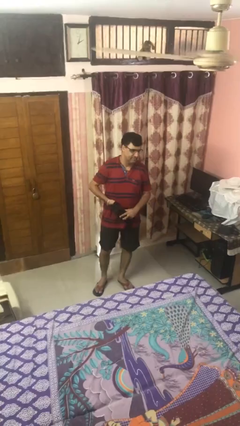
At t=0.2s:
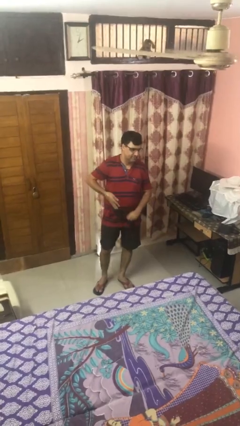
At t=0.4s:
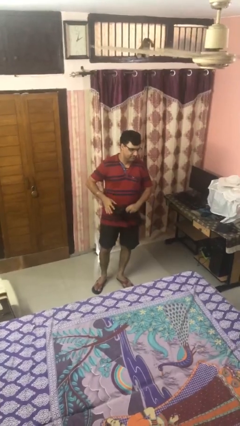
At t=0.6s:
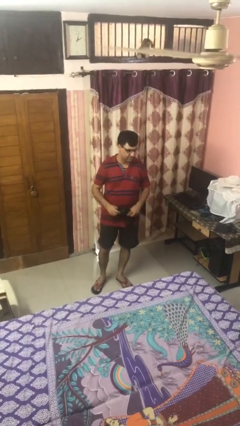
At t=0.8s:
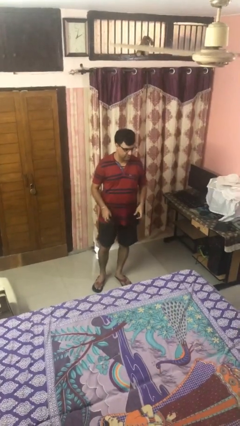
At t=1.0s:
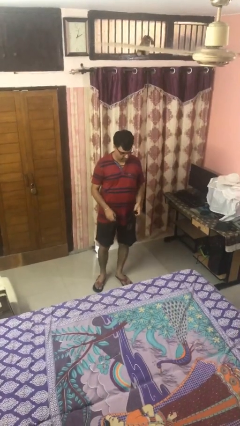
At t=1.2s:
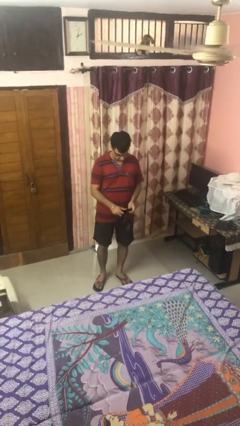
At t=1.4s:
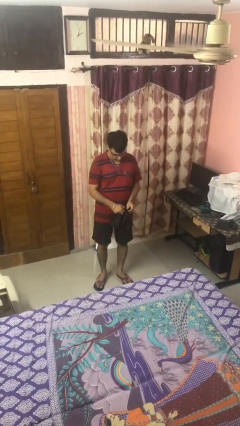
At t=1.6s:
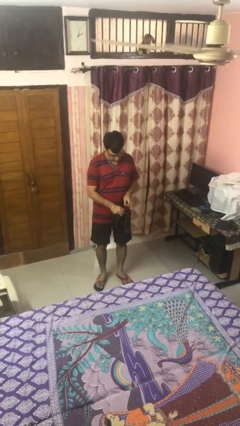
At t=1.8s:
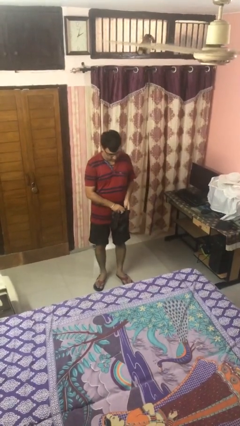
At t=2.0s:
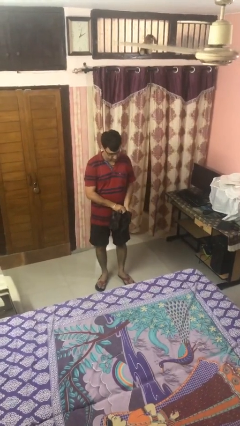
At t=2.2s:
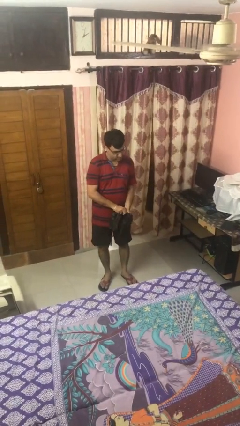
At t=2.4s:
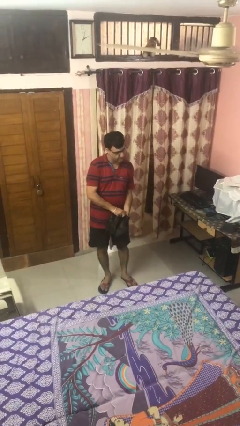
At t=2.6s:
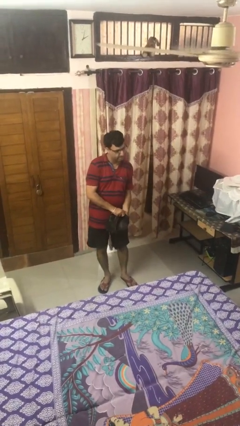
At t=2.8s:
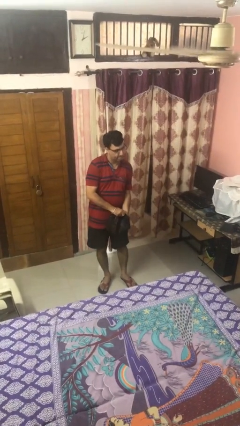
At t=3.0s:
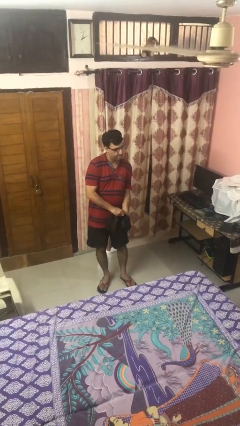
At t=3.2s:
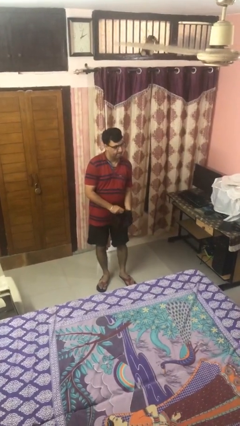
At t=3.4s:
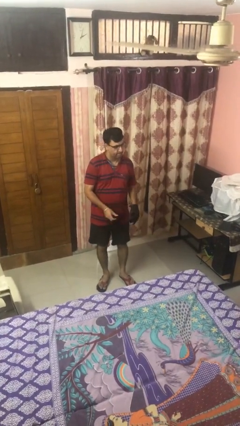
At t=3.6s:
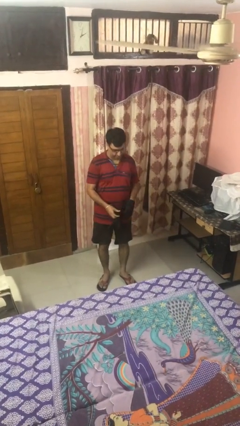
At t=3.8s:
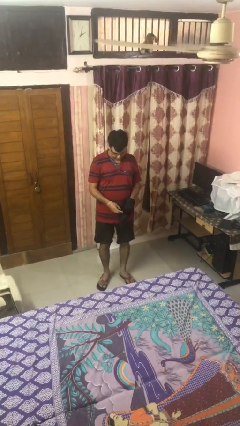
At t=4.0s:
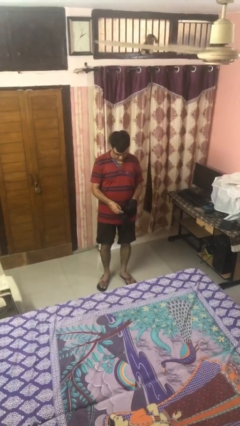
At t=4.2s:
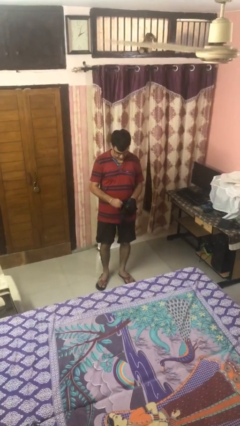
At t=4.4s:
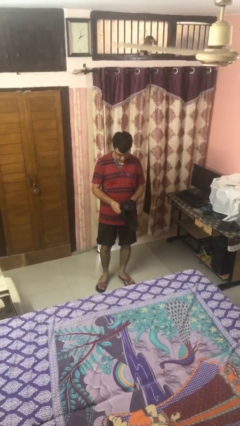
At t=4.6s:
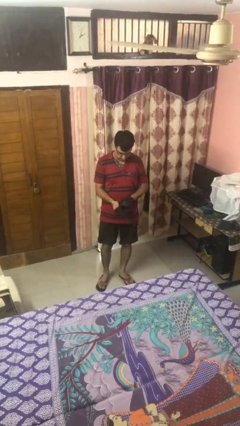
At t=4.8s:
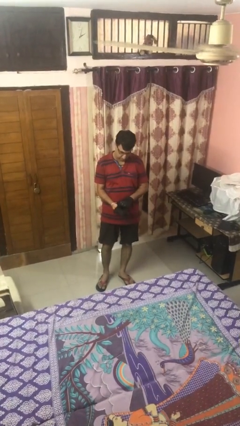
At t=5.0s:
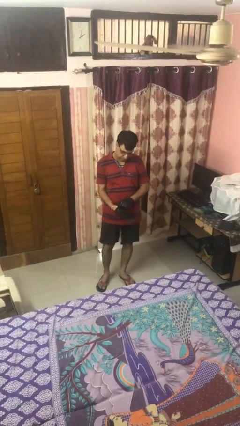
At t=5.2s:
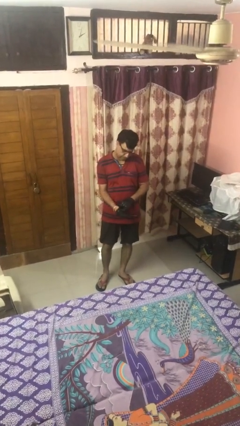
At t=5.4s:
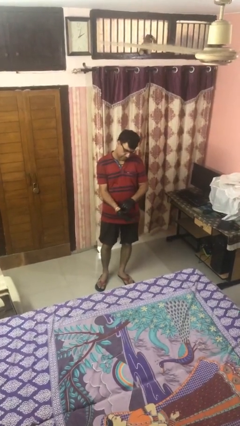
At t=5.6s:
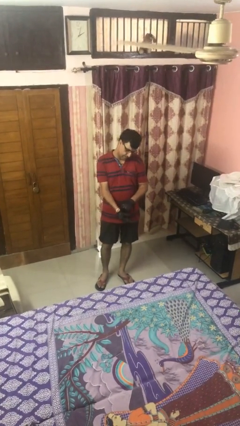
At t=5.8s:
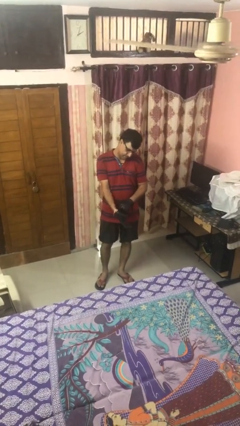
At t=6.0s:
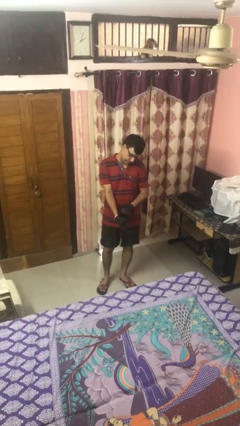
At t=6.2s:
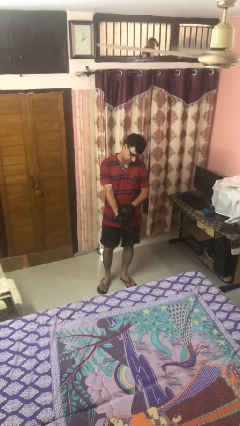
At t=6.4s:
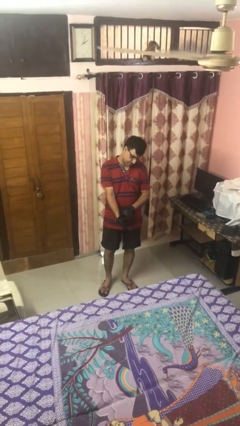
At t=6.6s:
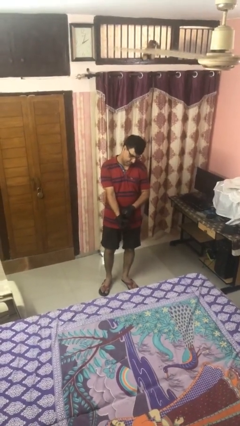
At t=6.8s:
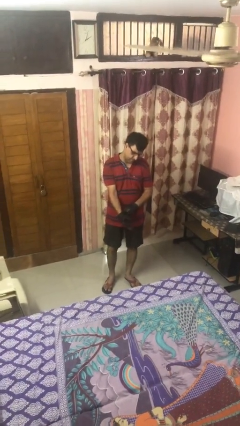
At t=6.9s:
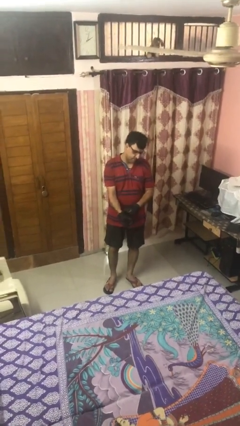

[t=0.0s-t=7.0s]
person puts on gloves

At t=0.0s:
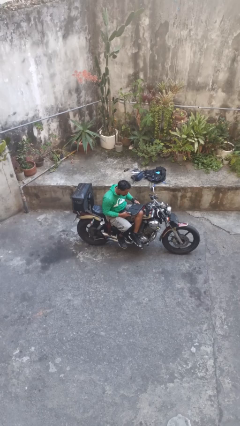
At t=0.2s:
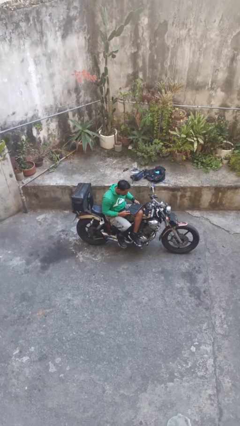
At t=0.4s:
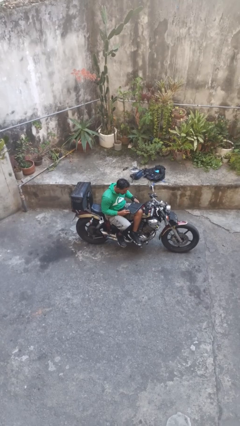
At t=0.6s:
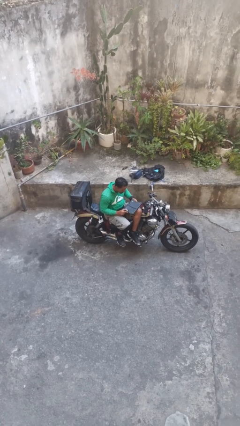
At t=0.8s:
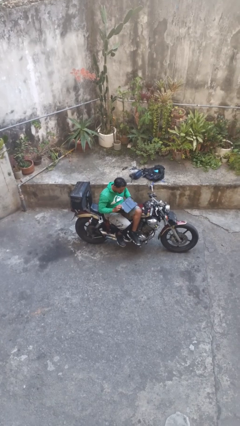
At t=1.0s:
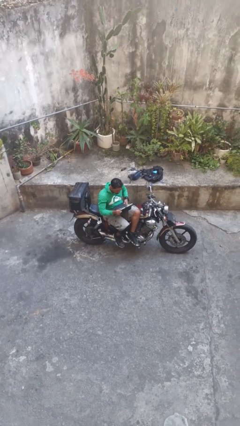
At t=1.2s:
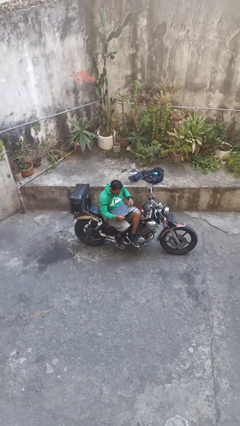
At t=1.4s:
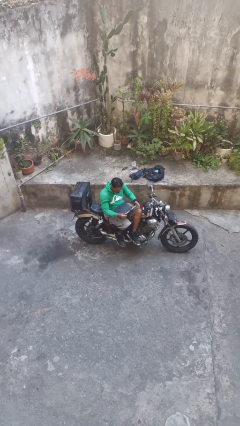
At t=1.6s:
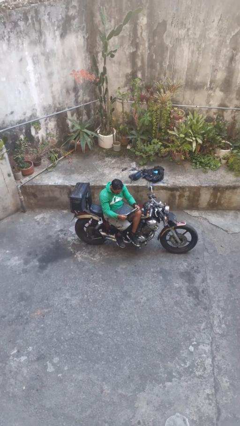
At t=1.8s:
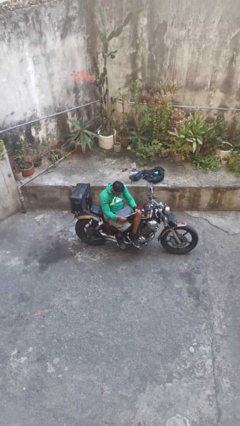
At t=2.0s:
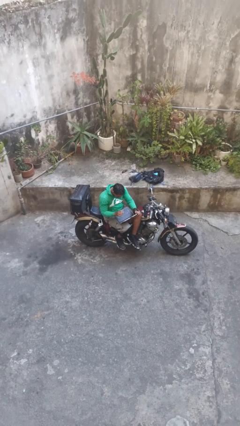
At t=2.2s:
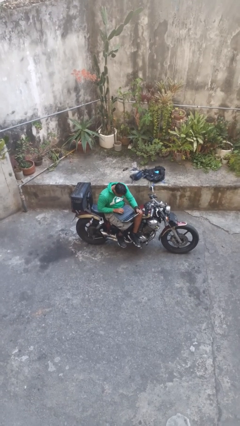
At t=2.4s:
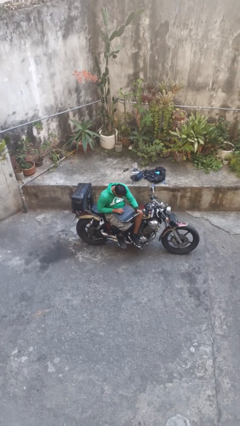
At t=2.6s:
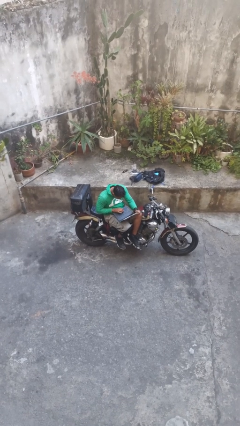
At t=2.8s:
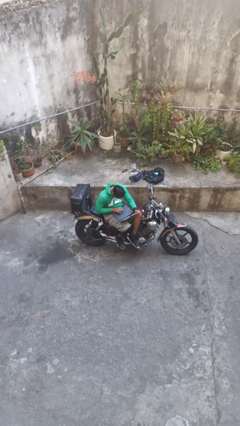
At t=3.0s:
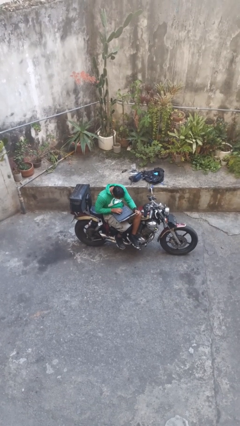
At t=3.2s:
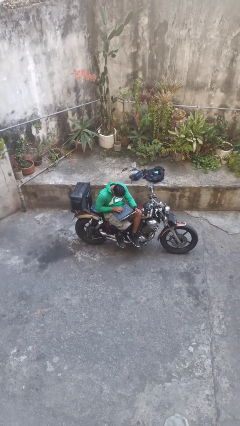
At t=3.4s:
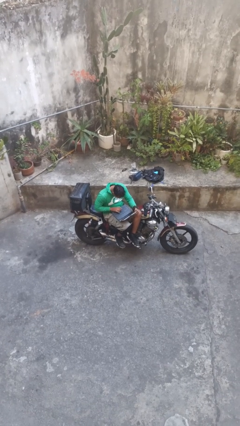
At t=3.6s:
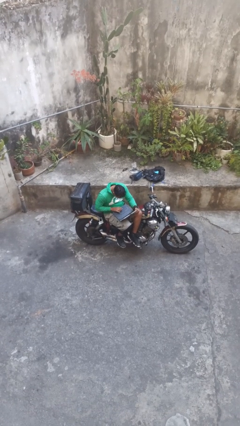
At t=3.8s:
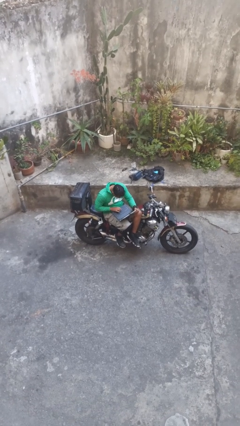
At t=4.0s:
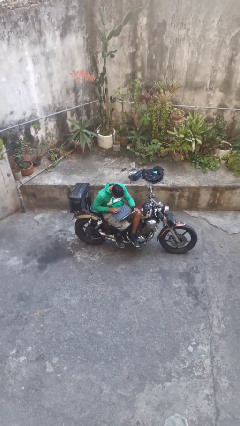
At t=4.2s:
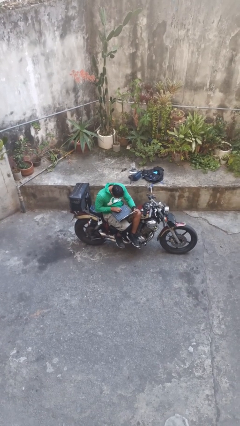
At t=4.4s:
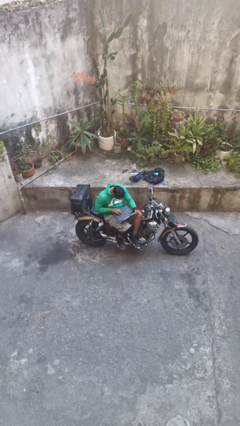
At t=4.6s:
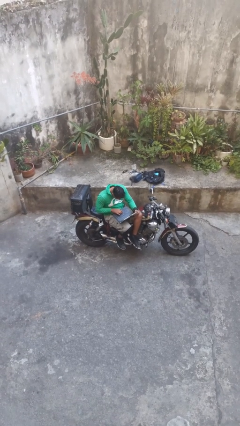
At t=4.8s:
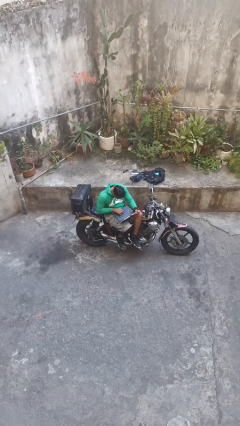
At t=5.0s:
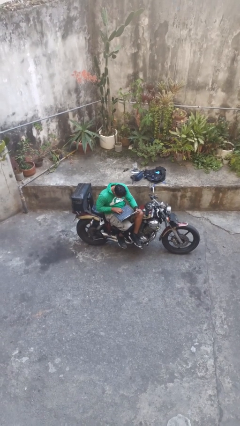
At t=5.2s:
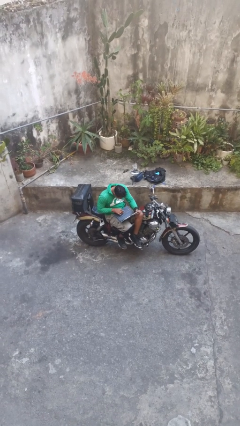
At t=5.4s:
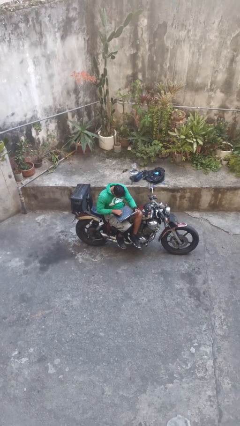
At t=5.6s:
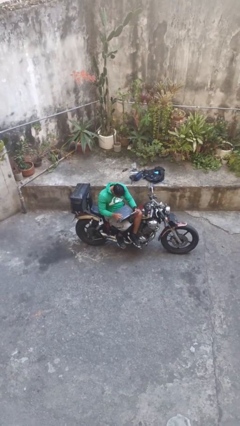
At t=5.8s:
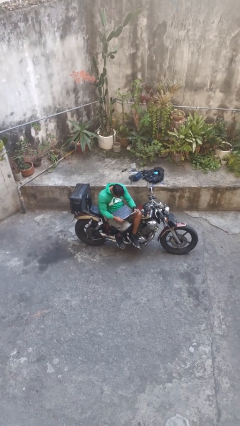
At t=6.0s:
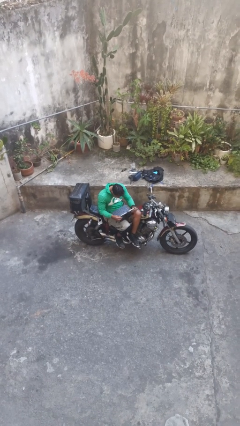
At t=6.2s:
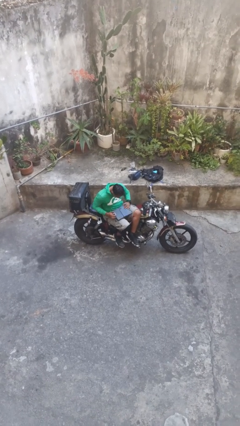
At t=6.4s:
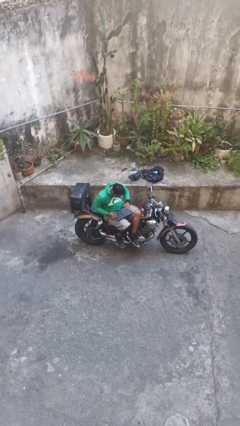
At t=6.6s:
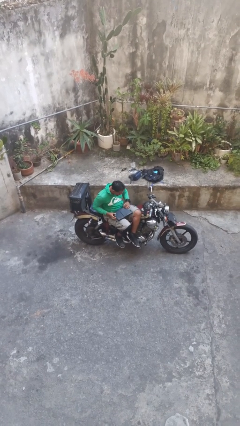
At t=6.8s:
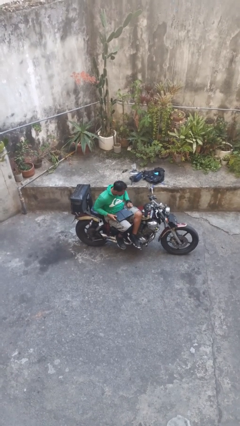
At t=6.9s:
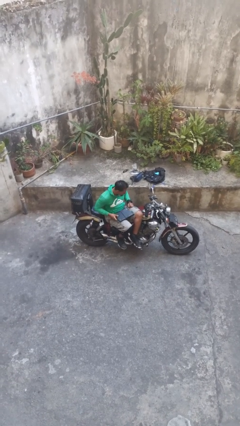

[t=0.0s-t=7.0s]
person interacts with laptop

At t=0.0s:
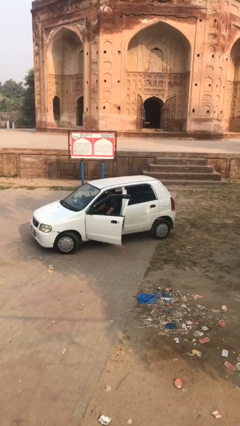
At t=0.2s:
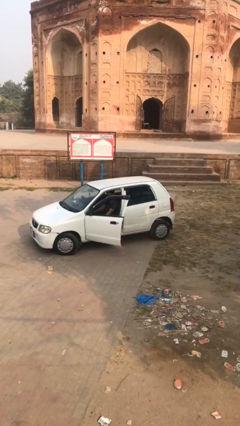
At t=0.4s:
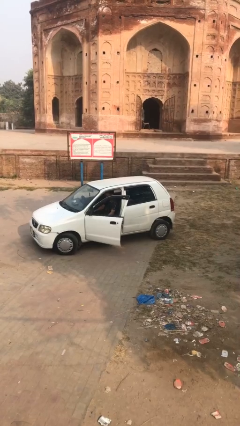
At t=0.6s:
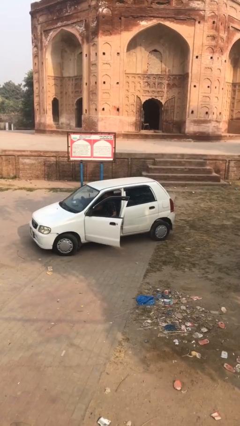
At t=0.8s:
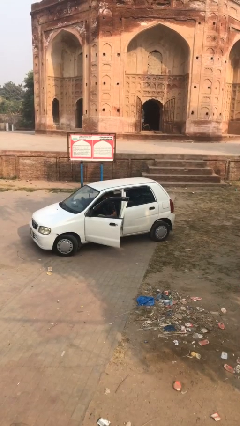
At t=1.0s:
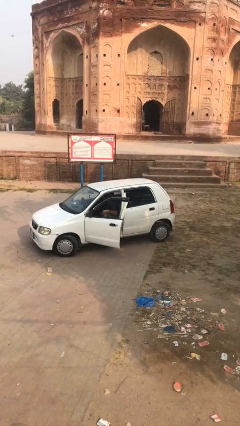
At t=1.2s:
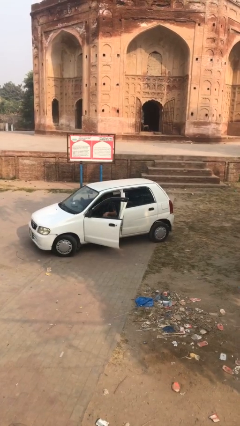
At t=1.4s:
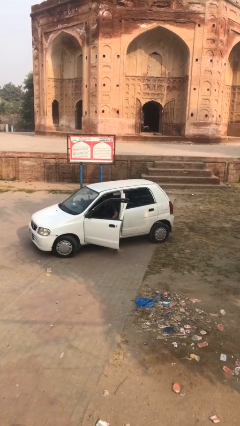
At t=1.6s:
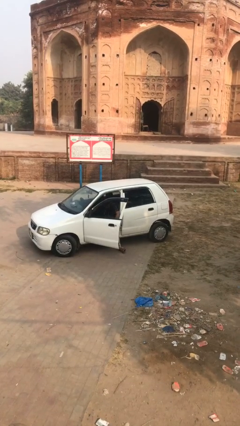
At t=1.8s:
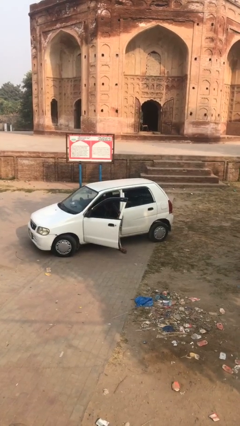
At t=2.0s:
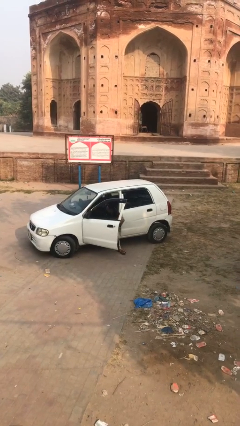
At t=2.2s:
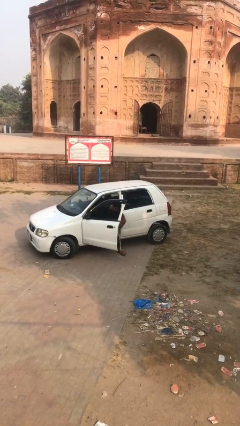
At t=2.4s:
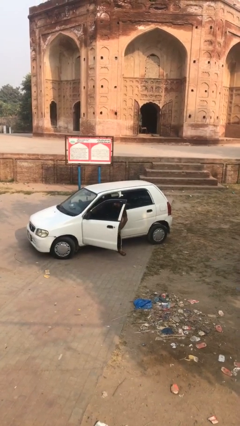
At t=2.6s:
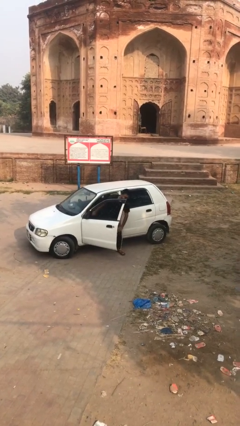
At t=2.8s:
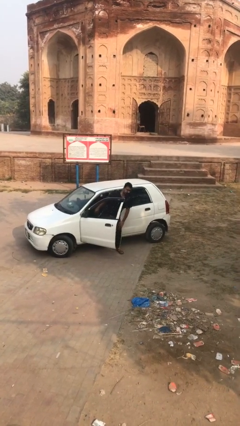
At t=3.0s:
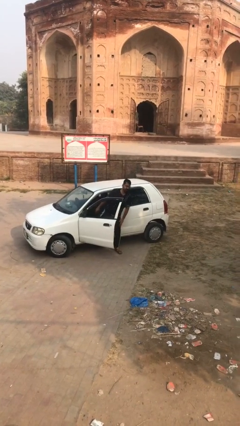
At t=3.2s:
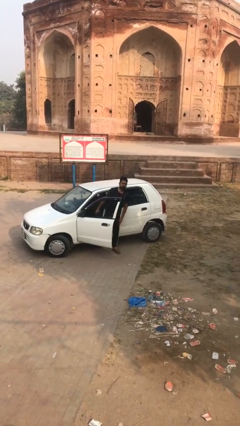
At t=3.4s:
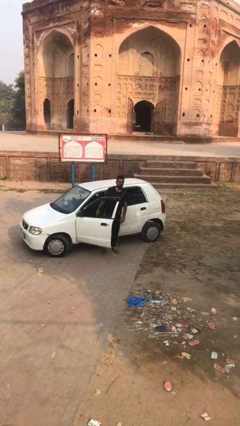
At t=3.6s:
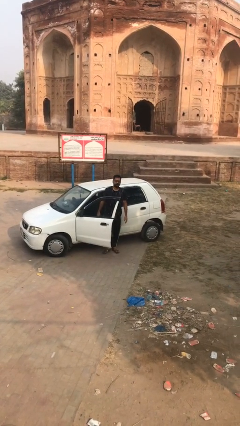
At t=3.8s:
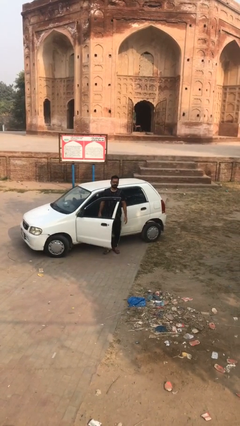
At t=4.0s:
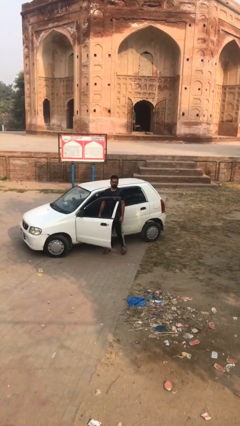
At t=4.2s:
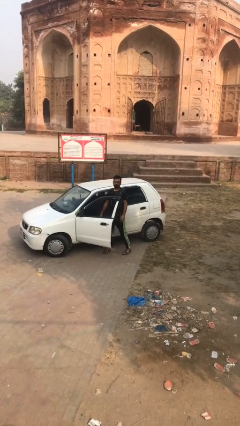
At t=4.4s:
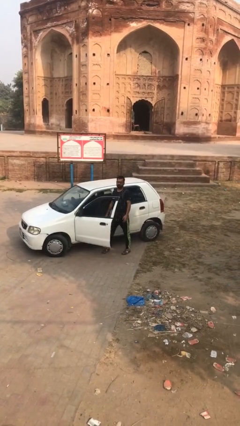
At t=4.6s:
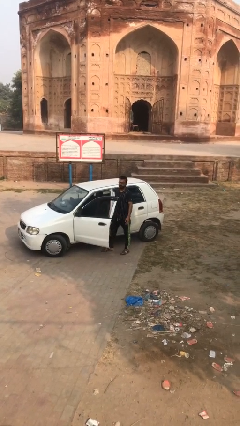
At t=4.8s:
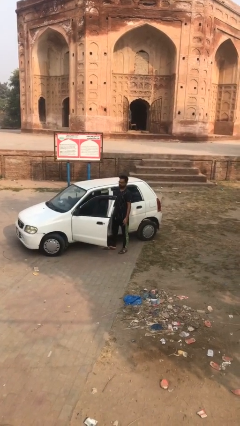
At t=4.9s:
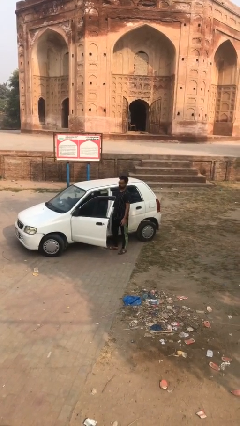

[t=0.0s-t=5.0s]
person exits car
